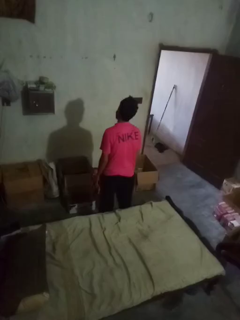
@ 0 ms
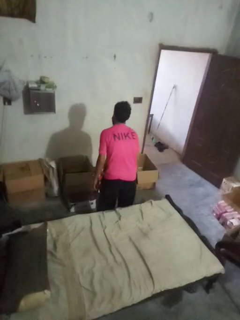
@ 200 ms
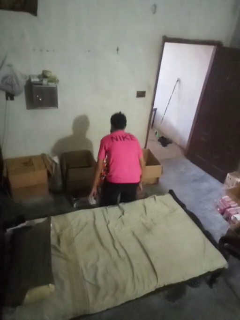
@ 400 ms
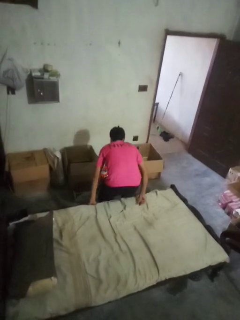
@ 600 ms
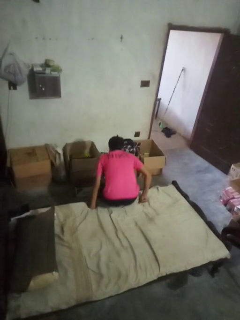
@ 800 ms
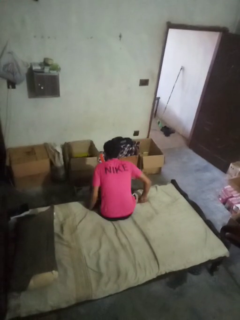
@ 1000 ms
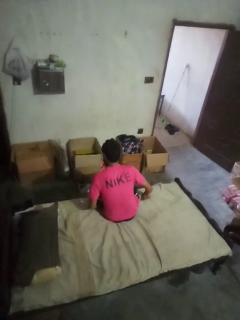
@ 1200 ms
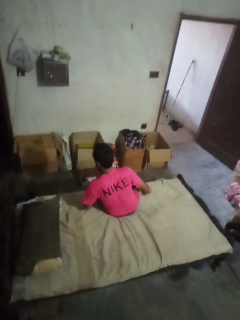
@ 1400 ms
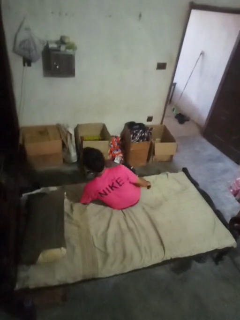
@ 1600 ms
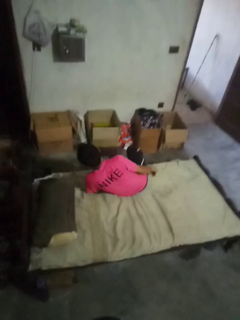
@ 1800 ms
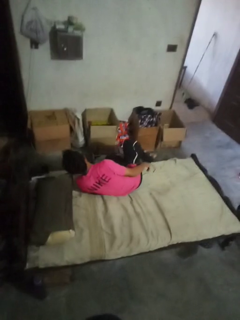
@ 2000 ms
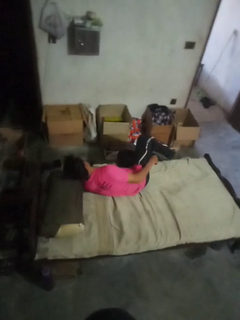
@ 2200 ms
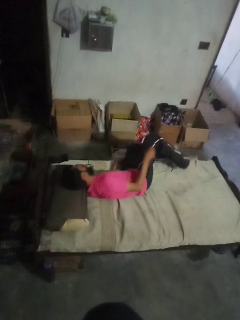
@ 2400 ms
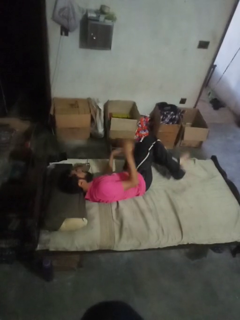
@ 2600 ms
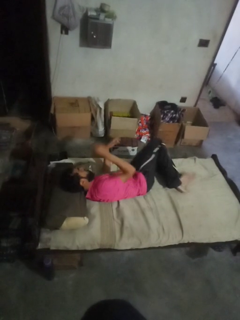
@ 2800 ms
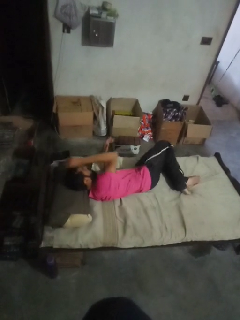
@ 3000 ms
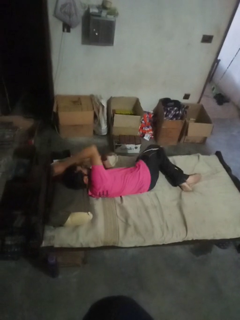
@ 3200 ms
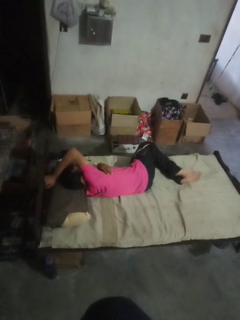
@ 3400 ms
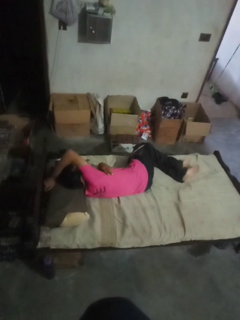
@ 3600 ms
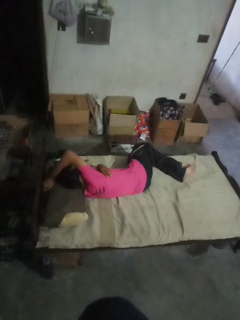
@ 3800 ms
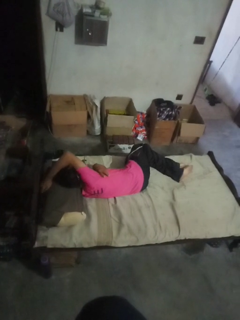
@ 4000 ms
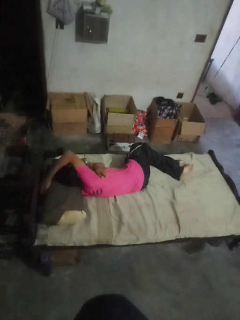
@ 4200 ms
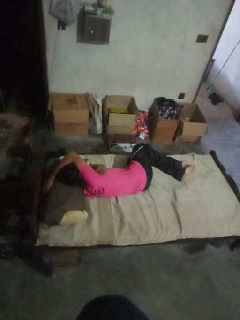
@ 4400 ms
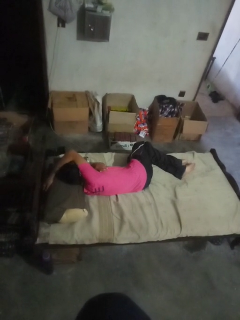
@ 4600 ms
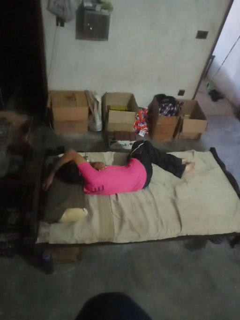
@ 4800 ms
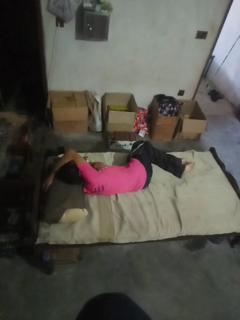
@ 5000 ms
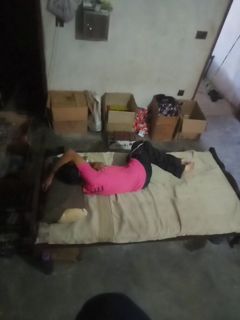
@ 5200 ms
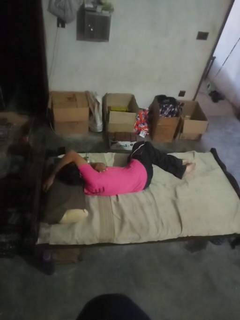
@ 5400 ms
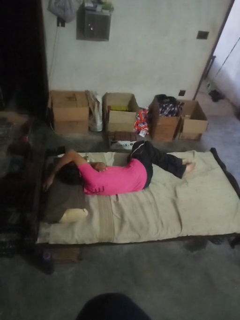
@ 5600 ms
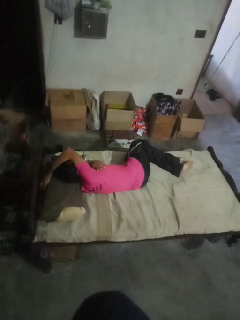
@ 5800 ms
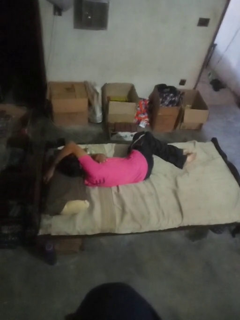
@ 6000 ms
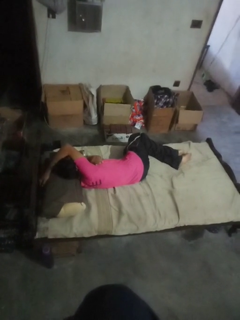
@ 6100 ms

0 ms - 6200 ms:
person lies down on bed

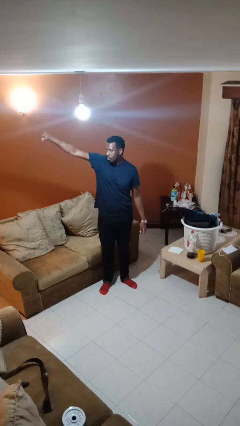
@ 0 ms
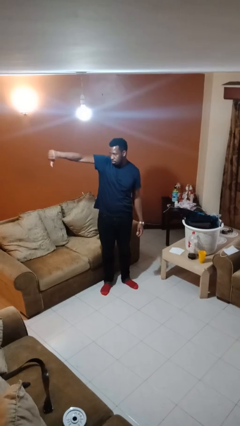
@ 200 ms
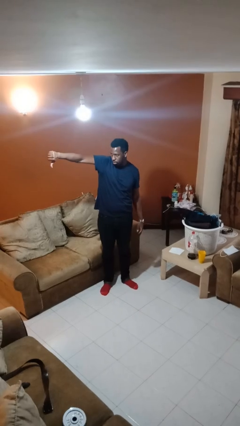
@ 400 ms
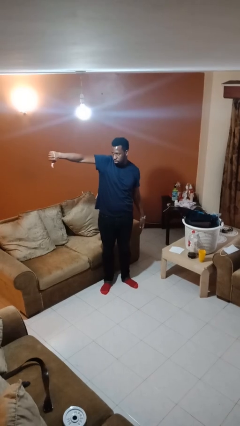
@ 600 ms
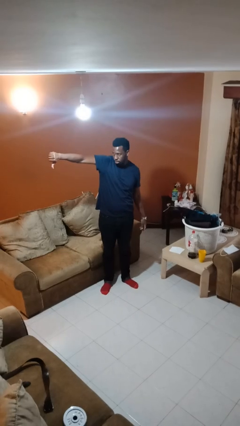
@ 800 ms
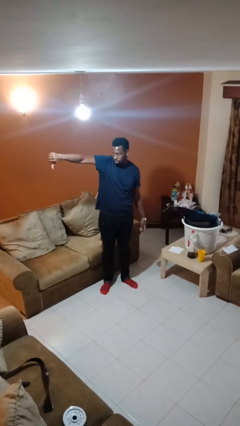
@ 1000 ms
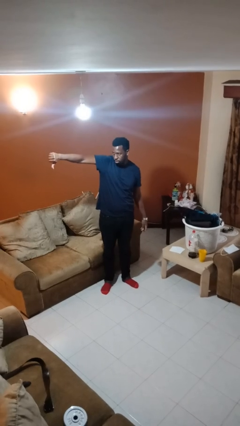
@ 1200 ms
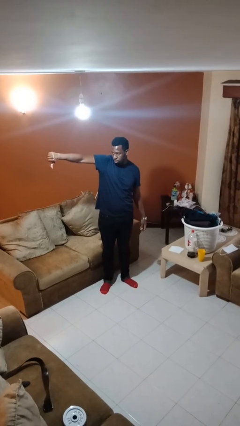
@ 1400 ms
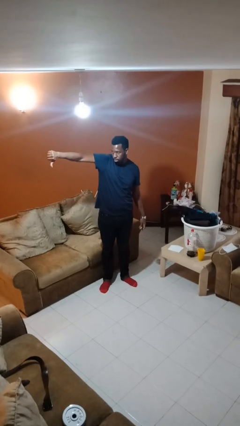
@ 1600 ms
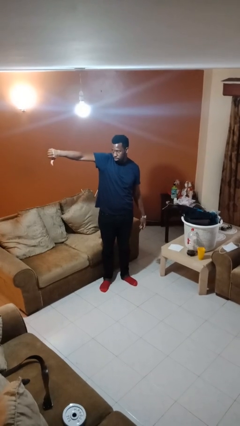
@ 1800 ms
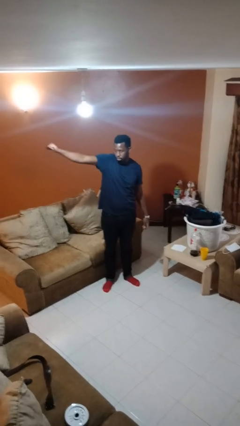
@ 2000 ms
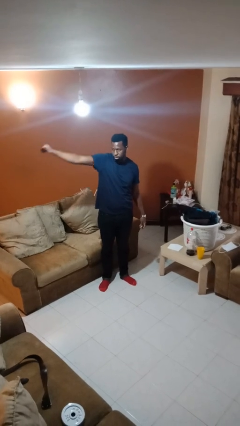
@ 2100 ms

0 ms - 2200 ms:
person gestures thumbs down

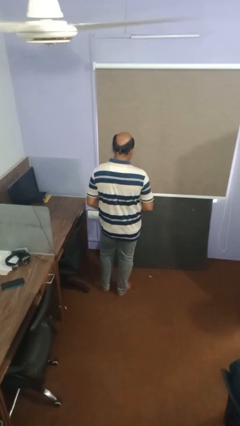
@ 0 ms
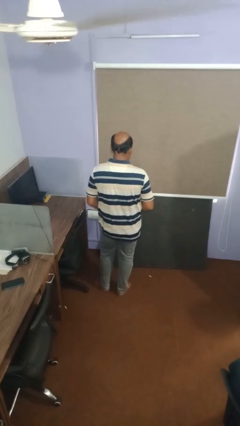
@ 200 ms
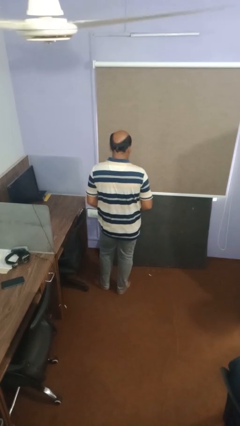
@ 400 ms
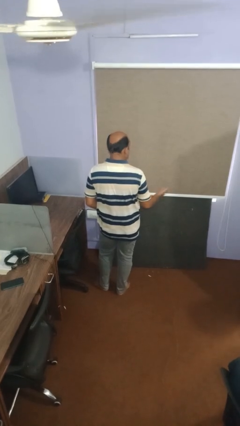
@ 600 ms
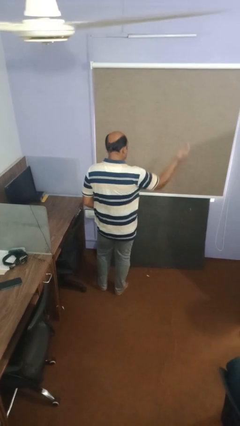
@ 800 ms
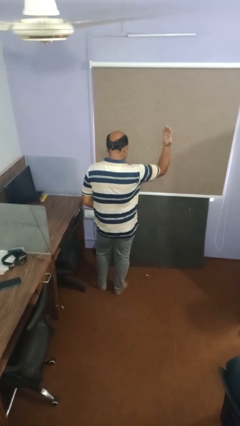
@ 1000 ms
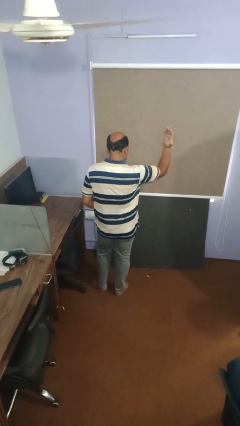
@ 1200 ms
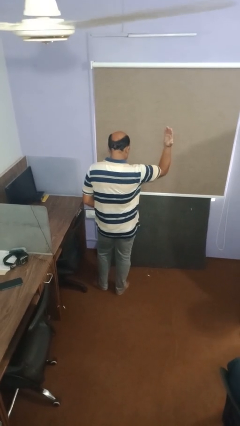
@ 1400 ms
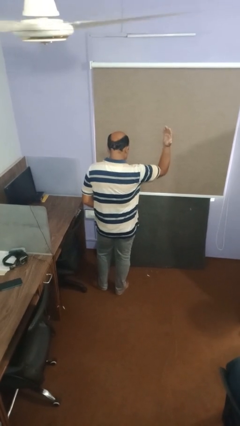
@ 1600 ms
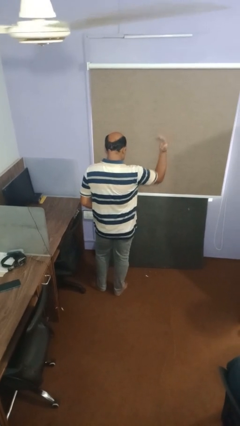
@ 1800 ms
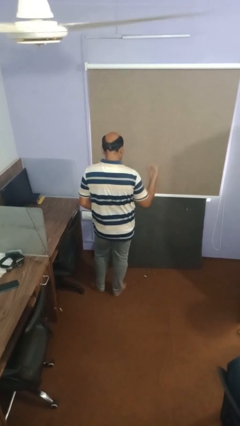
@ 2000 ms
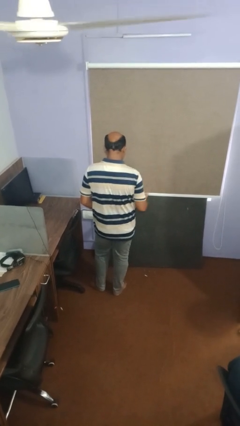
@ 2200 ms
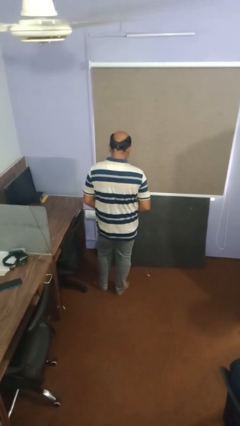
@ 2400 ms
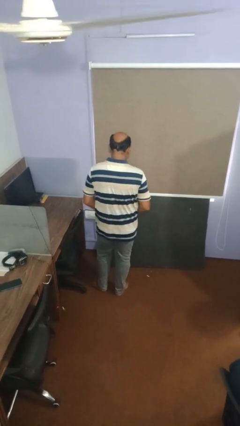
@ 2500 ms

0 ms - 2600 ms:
person gestures swipe right

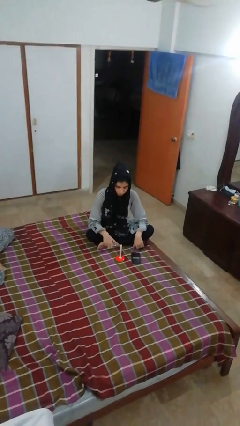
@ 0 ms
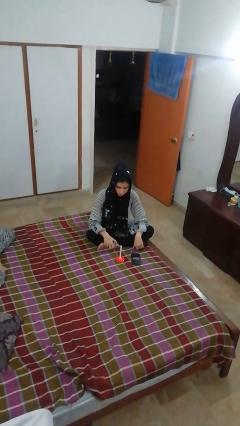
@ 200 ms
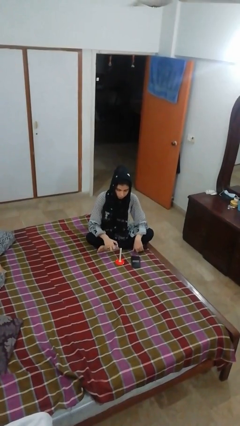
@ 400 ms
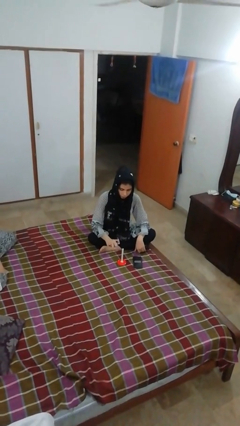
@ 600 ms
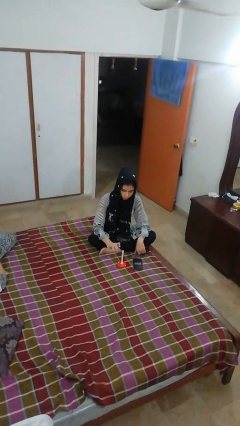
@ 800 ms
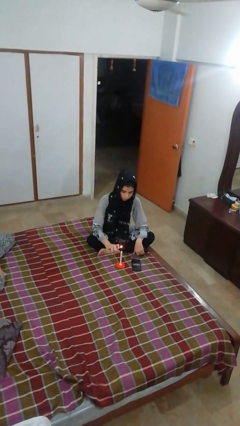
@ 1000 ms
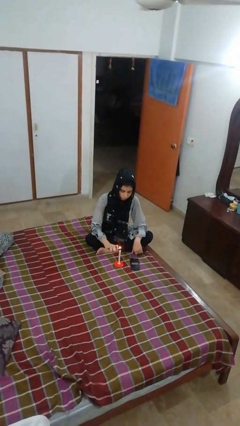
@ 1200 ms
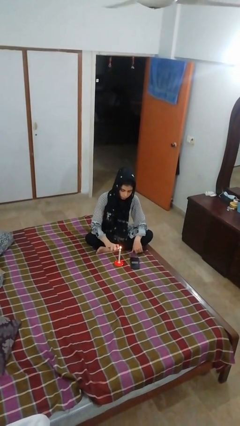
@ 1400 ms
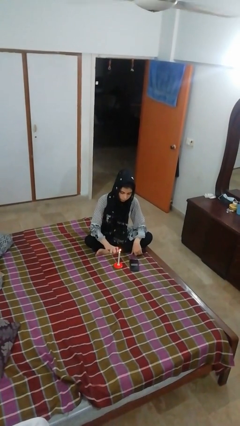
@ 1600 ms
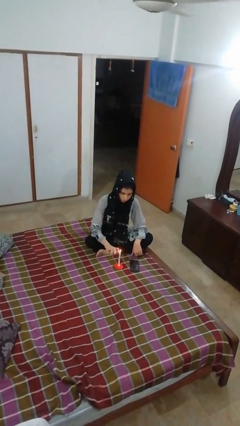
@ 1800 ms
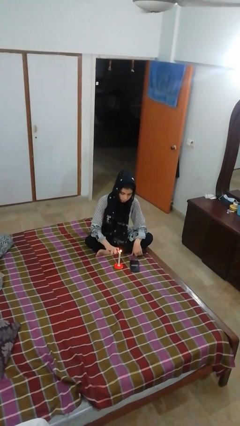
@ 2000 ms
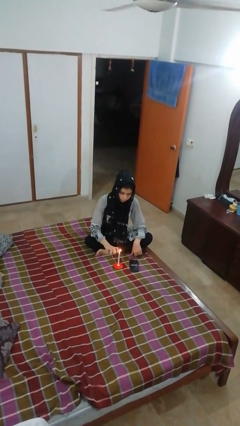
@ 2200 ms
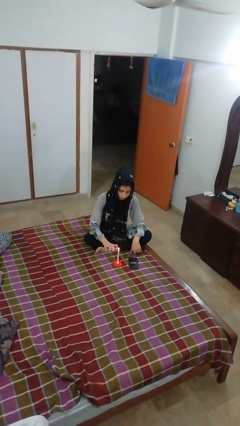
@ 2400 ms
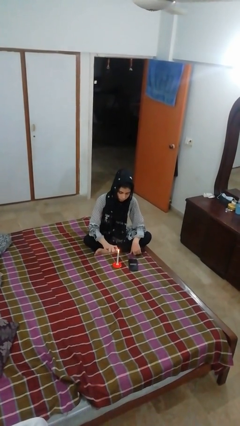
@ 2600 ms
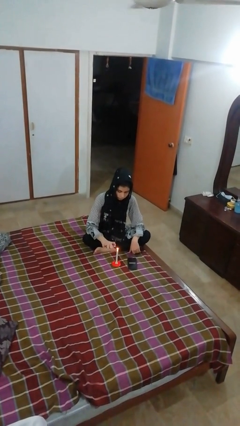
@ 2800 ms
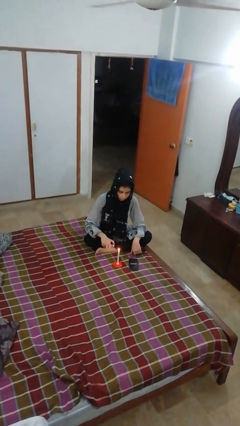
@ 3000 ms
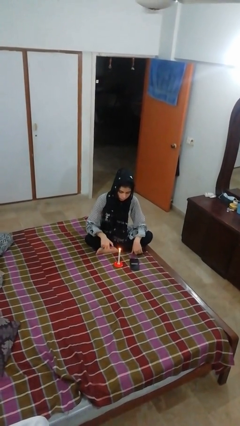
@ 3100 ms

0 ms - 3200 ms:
person lights candle

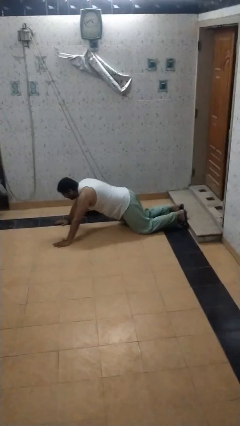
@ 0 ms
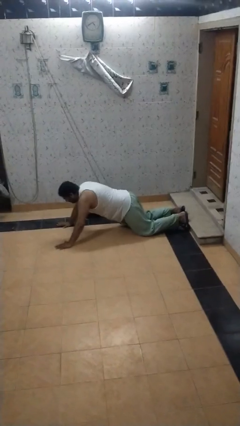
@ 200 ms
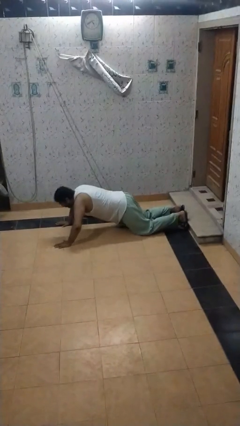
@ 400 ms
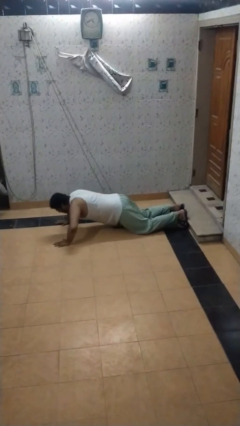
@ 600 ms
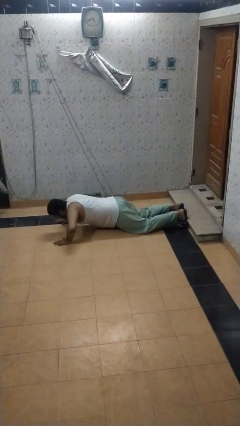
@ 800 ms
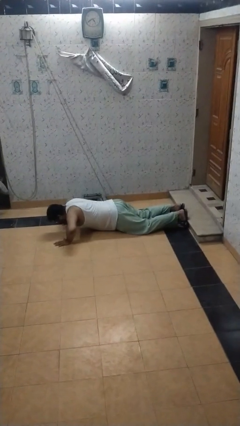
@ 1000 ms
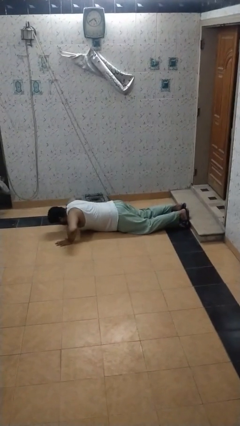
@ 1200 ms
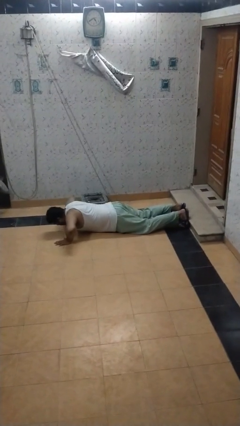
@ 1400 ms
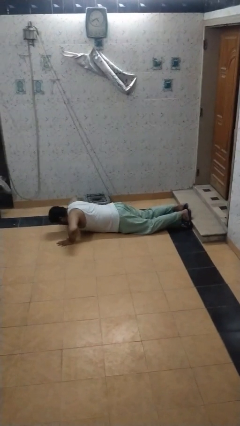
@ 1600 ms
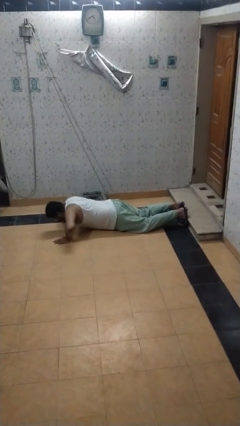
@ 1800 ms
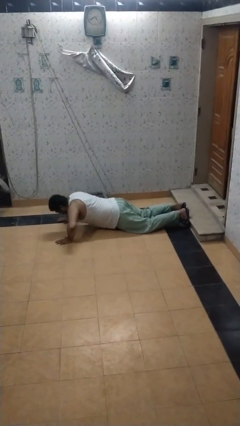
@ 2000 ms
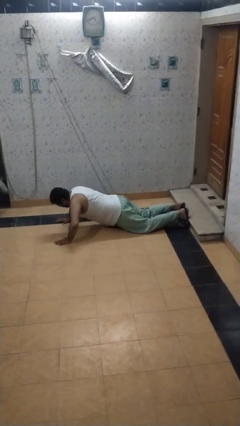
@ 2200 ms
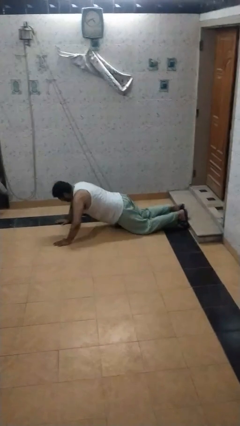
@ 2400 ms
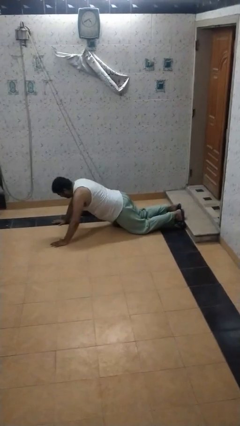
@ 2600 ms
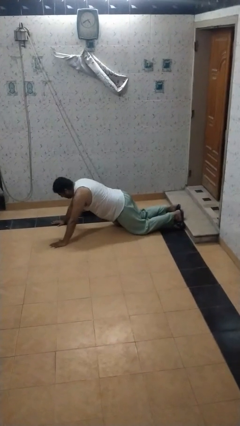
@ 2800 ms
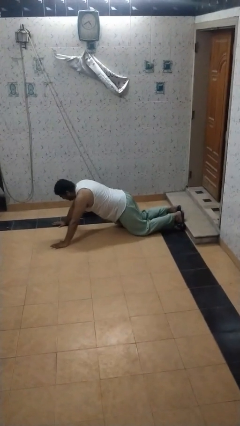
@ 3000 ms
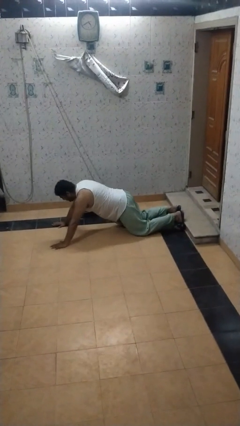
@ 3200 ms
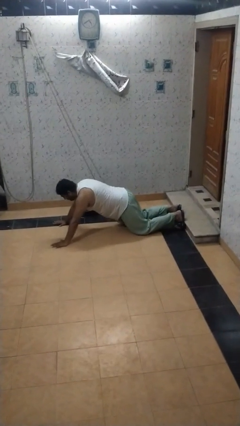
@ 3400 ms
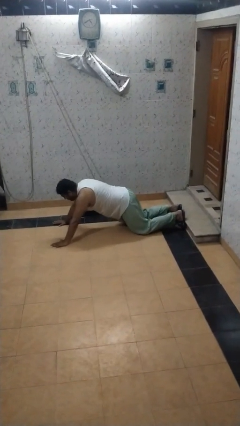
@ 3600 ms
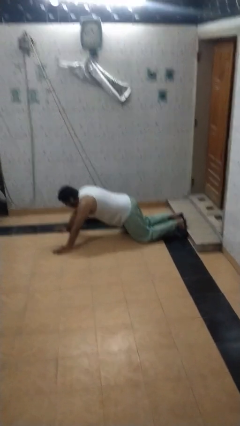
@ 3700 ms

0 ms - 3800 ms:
person exercises with pushup

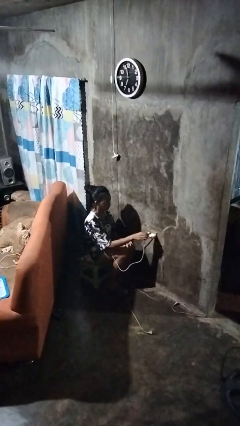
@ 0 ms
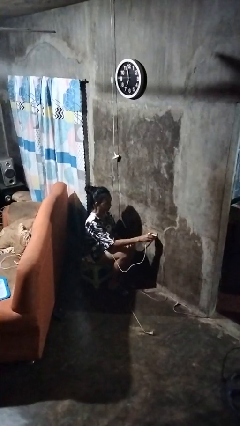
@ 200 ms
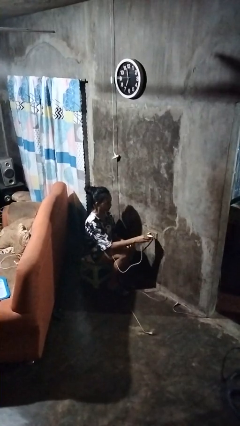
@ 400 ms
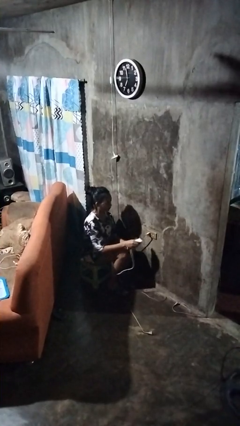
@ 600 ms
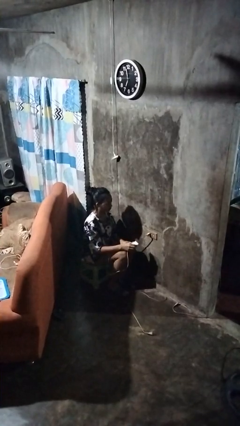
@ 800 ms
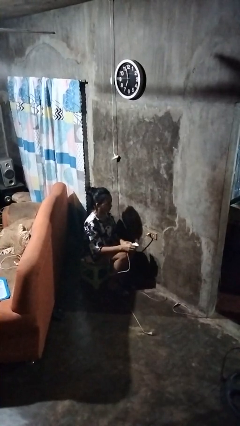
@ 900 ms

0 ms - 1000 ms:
person unplugs from electrical socket
